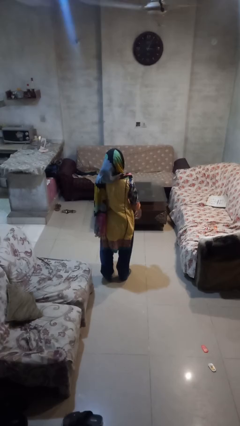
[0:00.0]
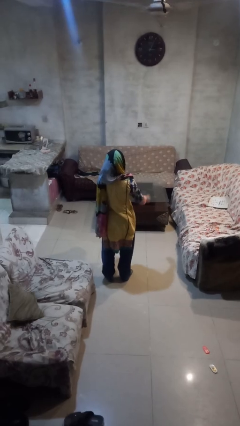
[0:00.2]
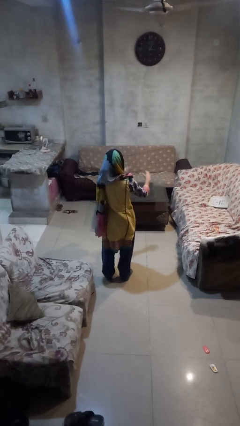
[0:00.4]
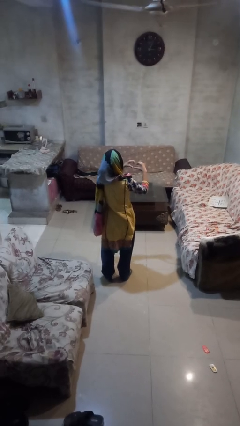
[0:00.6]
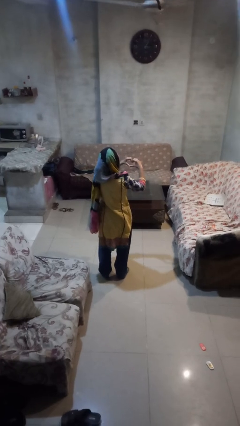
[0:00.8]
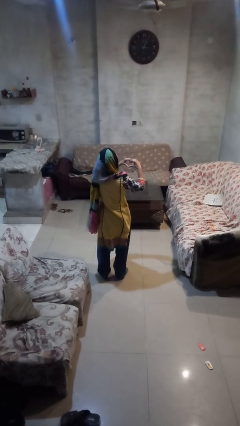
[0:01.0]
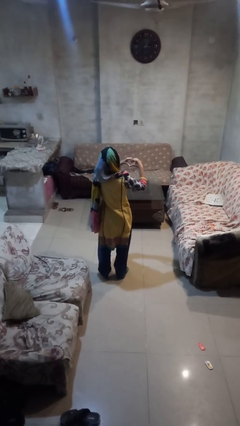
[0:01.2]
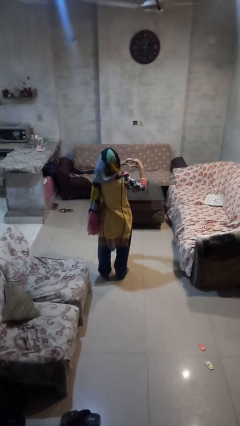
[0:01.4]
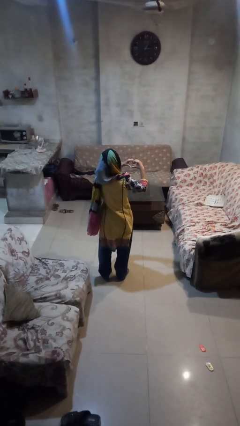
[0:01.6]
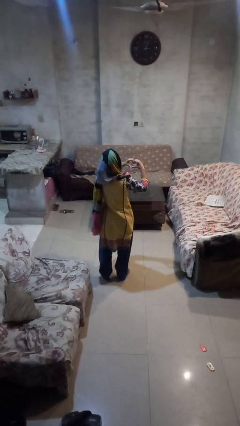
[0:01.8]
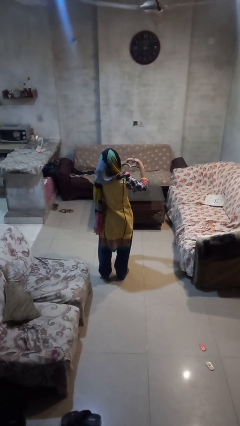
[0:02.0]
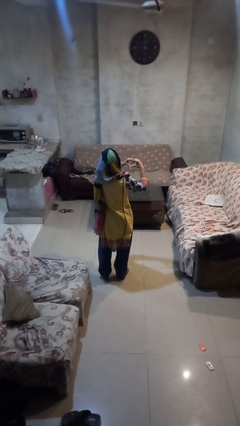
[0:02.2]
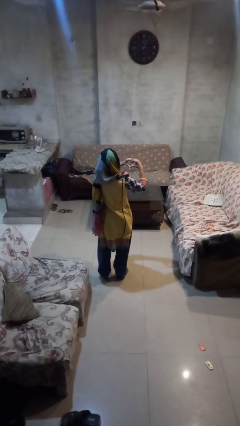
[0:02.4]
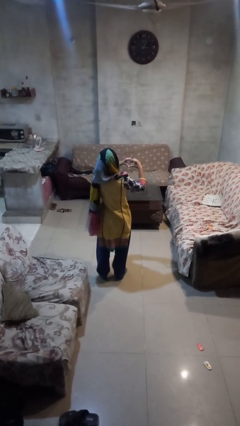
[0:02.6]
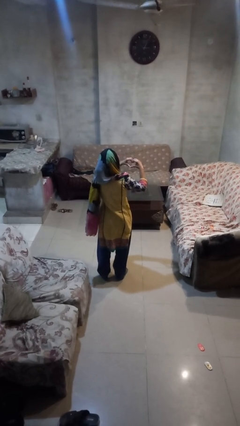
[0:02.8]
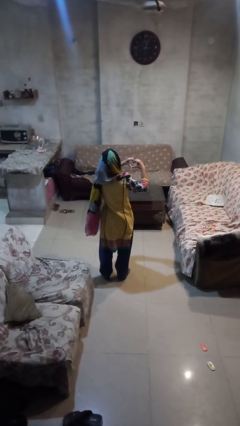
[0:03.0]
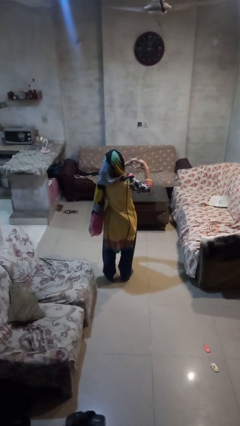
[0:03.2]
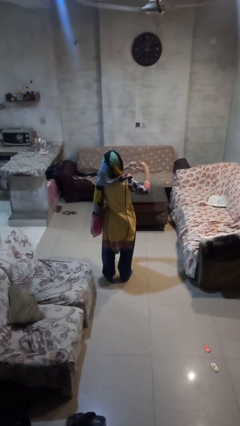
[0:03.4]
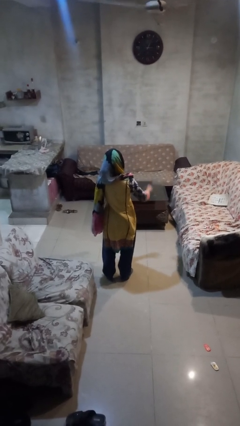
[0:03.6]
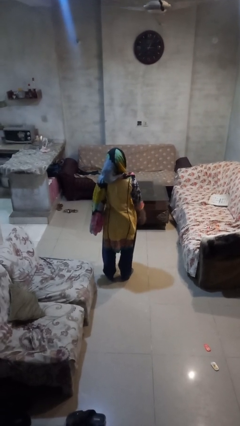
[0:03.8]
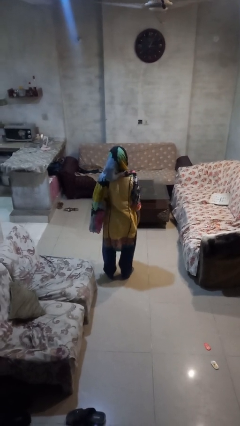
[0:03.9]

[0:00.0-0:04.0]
person gestures heart

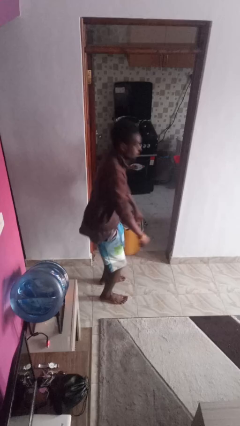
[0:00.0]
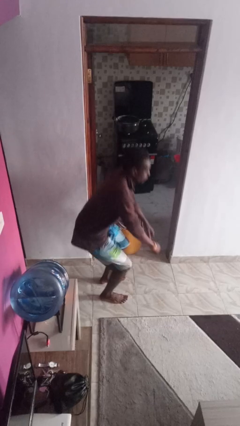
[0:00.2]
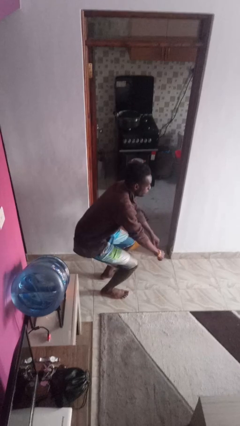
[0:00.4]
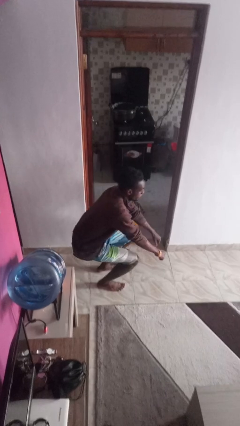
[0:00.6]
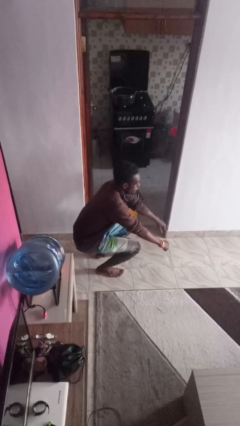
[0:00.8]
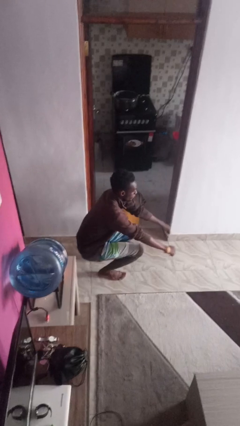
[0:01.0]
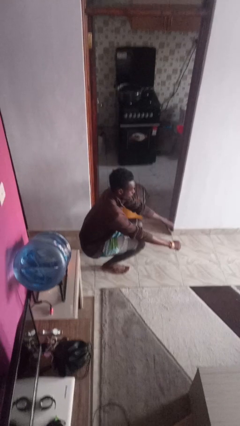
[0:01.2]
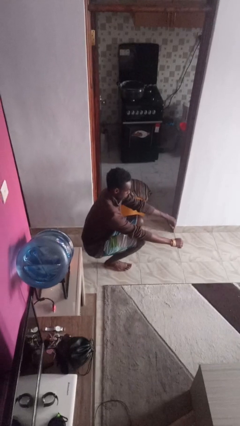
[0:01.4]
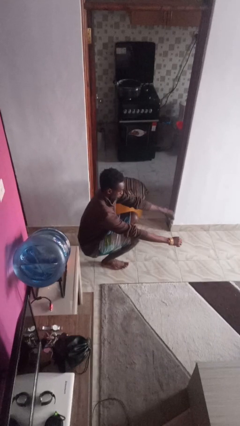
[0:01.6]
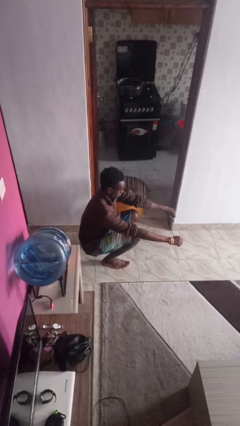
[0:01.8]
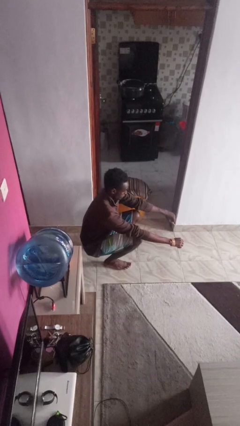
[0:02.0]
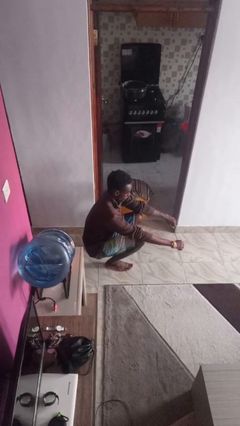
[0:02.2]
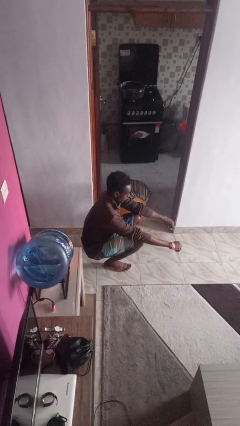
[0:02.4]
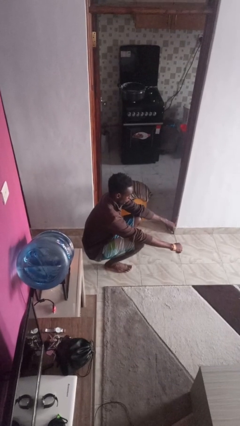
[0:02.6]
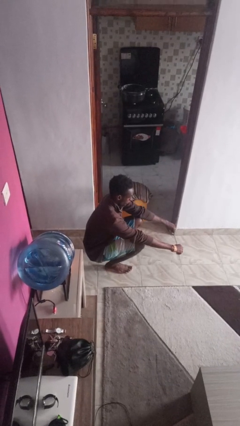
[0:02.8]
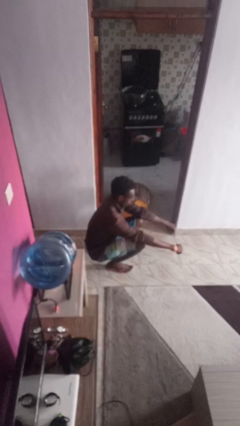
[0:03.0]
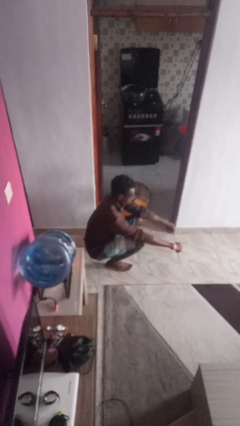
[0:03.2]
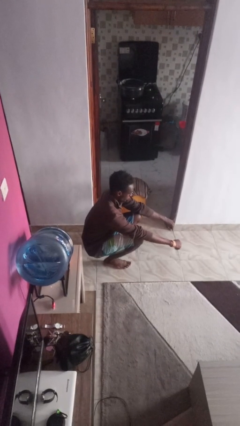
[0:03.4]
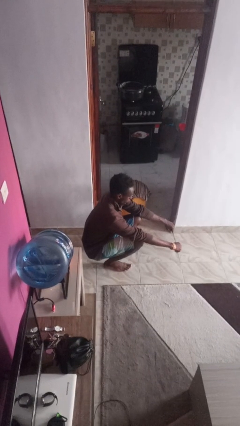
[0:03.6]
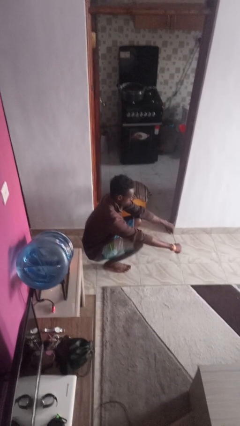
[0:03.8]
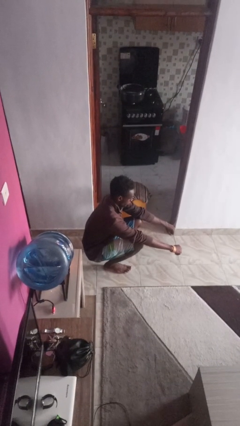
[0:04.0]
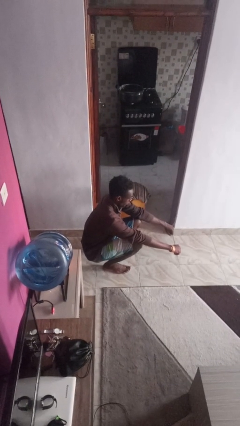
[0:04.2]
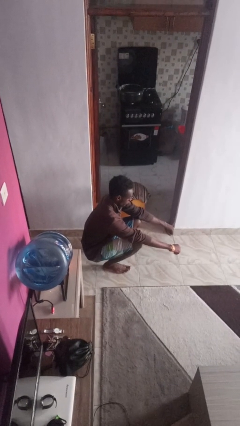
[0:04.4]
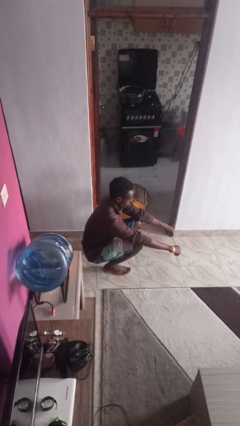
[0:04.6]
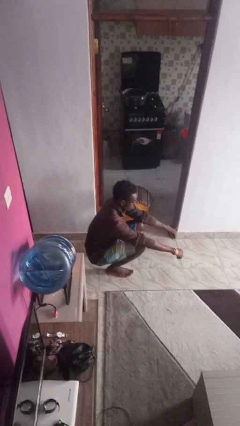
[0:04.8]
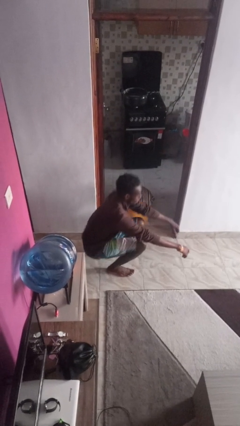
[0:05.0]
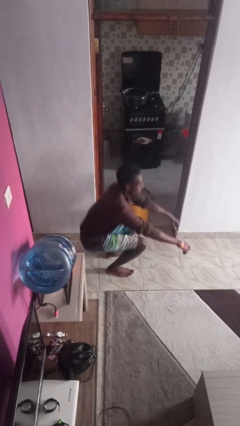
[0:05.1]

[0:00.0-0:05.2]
person squats

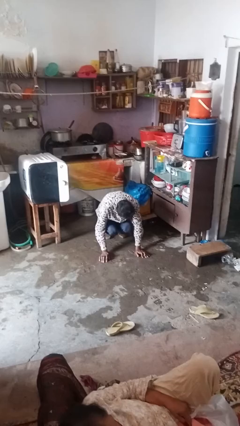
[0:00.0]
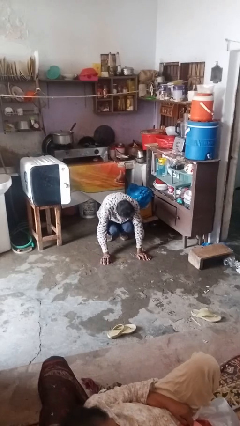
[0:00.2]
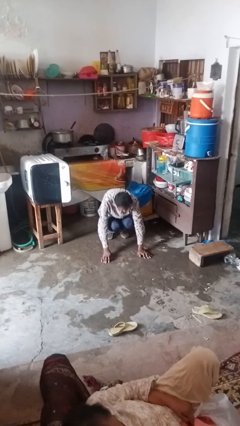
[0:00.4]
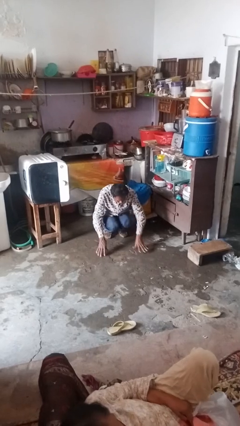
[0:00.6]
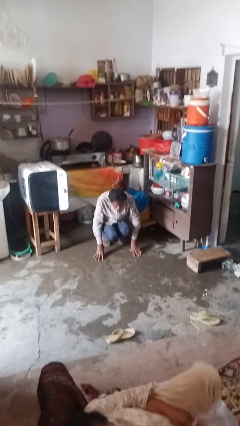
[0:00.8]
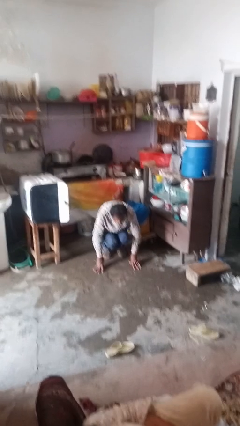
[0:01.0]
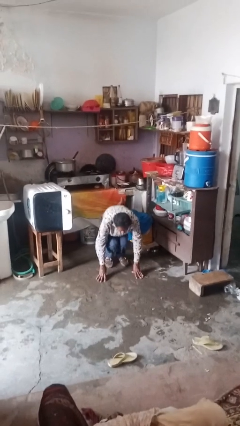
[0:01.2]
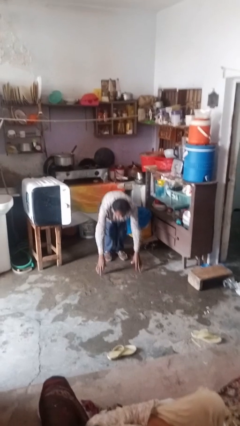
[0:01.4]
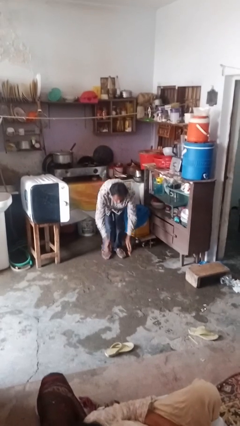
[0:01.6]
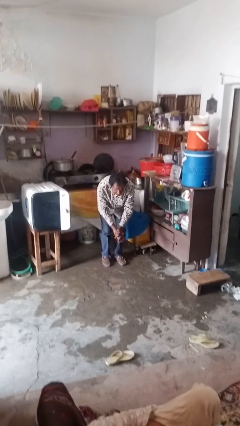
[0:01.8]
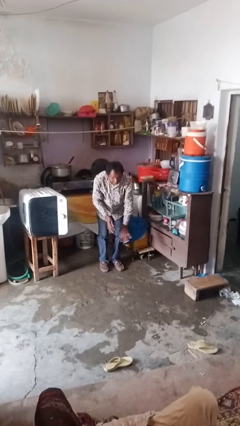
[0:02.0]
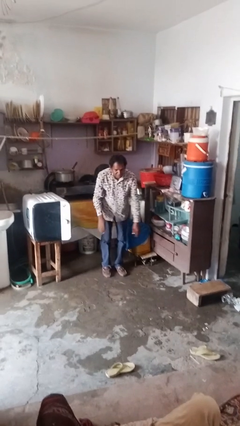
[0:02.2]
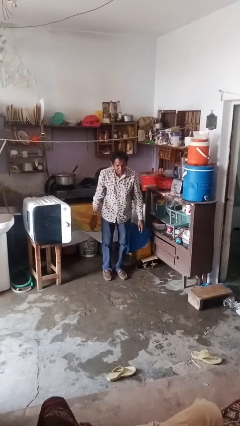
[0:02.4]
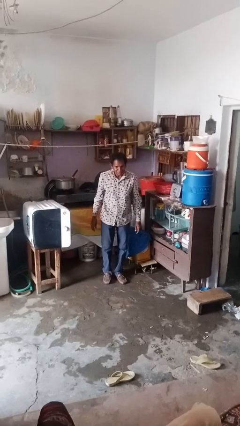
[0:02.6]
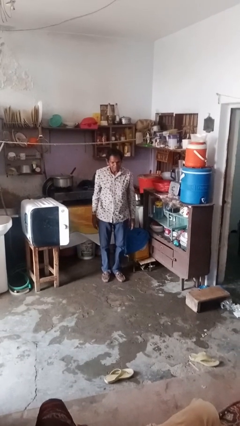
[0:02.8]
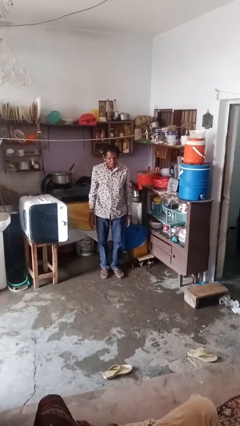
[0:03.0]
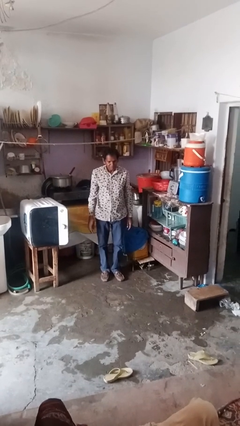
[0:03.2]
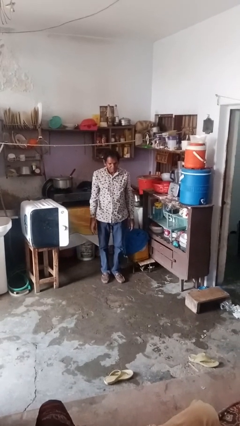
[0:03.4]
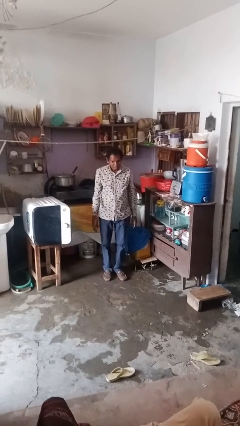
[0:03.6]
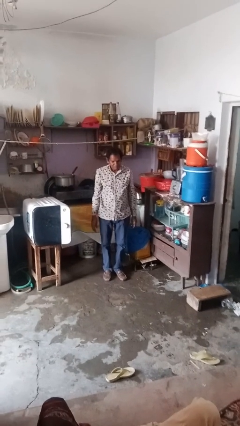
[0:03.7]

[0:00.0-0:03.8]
person stands up from floor

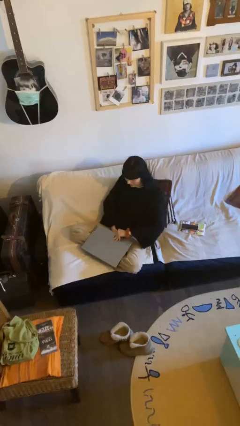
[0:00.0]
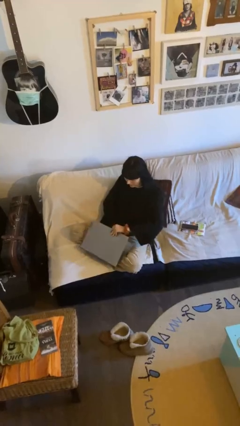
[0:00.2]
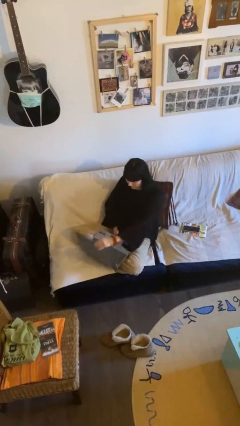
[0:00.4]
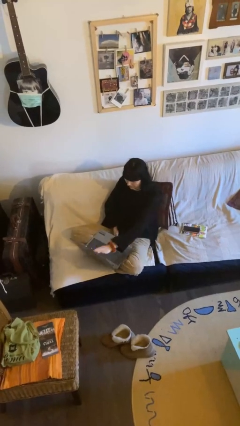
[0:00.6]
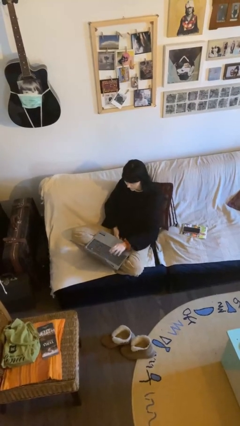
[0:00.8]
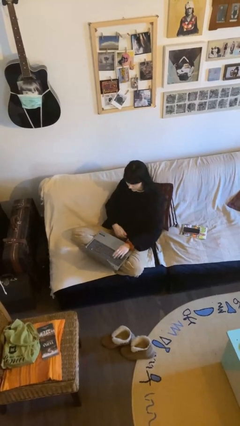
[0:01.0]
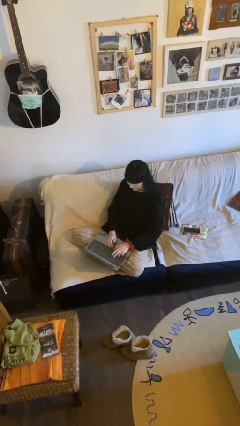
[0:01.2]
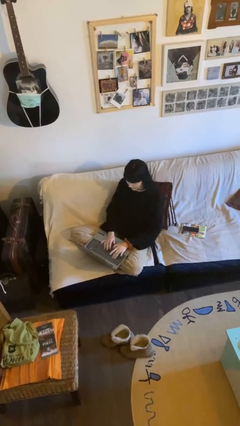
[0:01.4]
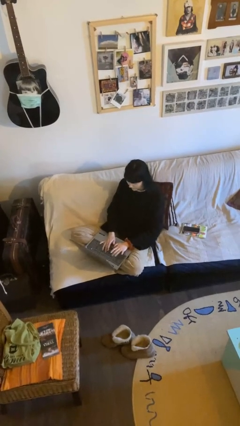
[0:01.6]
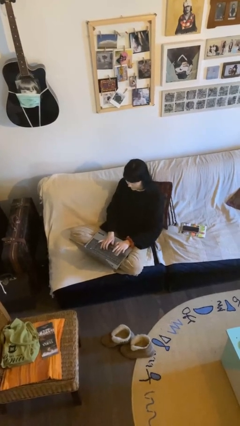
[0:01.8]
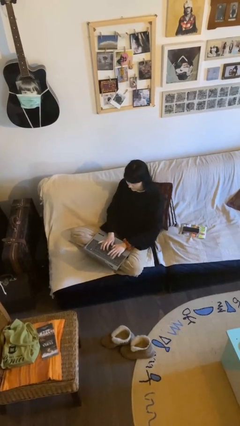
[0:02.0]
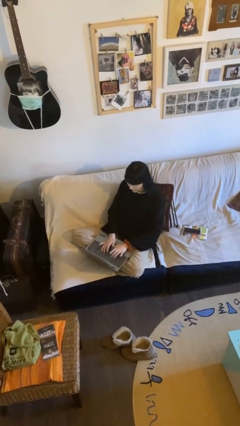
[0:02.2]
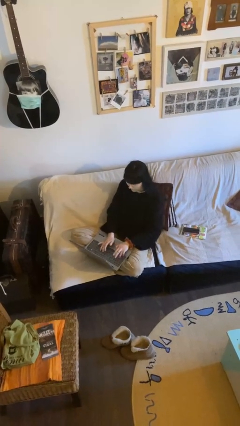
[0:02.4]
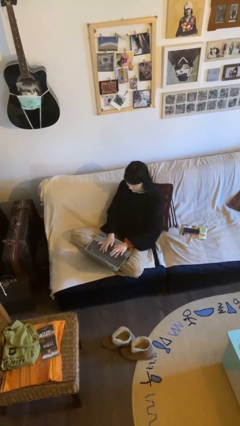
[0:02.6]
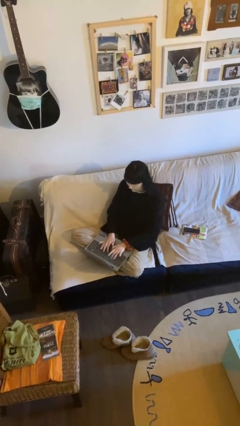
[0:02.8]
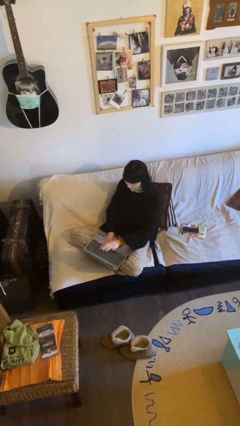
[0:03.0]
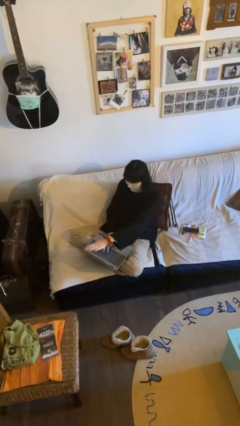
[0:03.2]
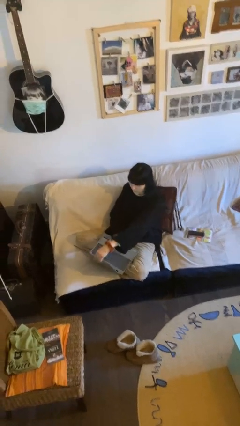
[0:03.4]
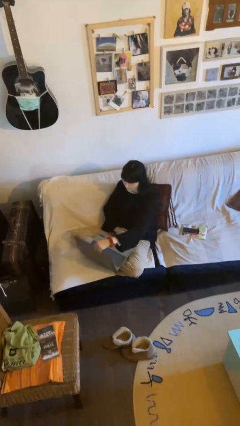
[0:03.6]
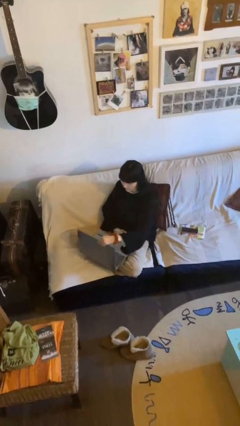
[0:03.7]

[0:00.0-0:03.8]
person interacts with laptop

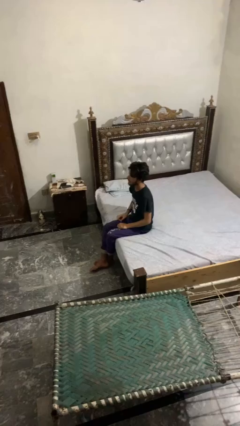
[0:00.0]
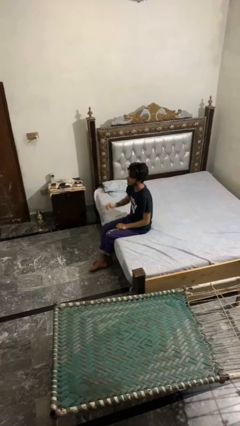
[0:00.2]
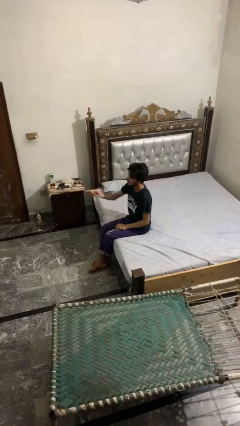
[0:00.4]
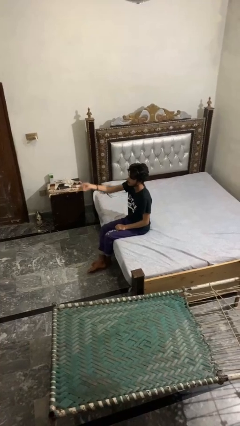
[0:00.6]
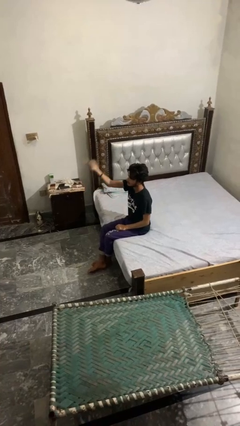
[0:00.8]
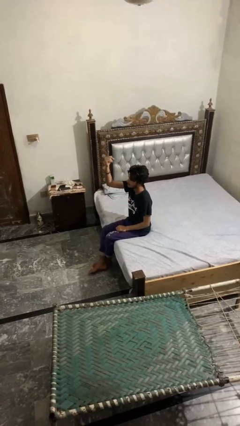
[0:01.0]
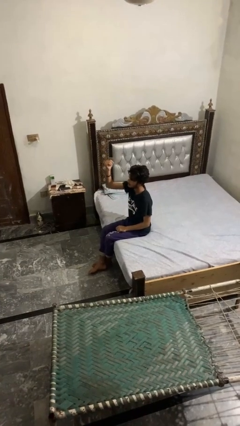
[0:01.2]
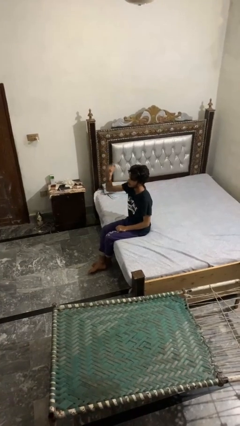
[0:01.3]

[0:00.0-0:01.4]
person gestures swipe up
